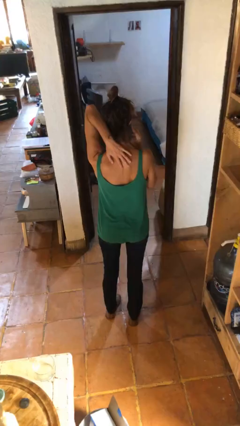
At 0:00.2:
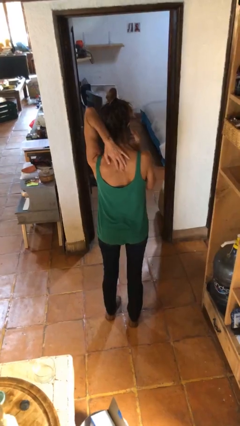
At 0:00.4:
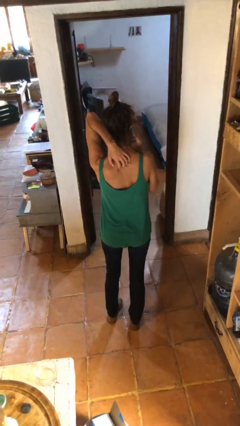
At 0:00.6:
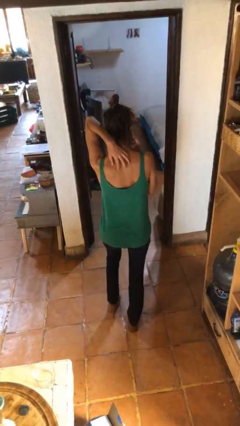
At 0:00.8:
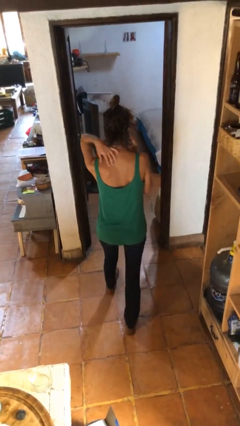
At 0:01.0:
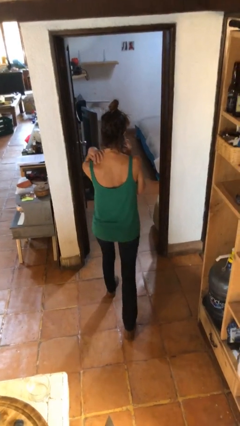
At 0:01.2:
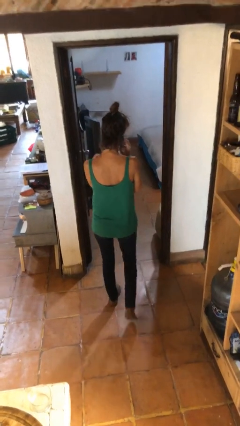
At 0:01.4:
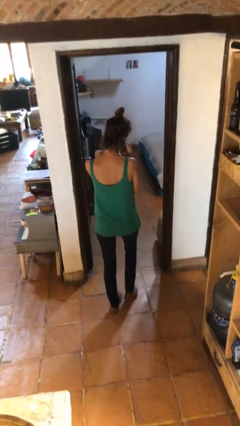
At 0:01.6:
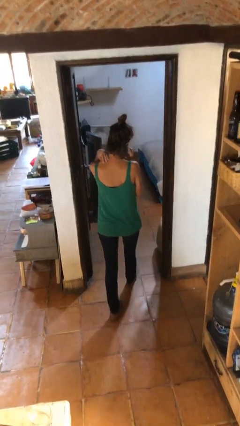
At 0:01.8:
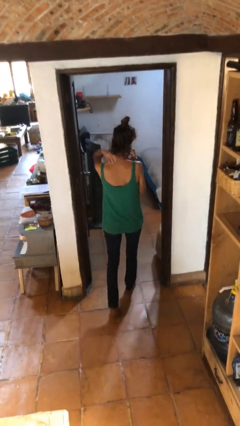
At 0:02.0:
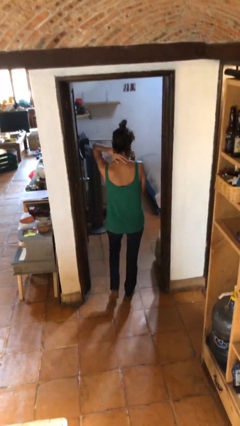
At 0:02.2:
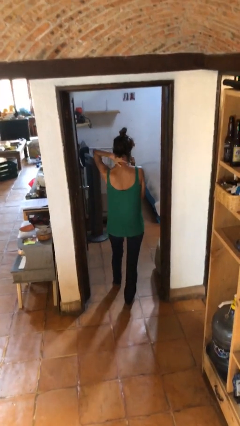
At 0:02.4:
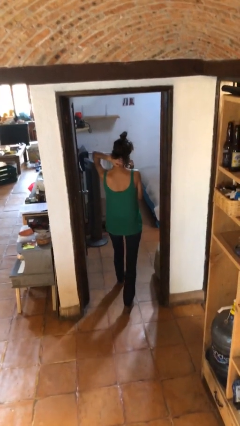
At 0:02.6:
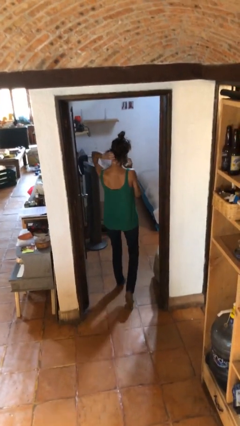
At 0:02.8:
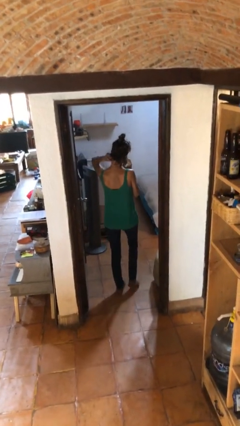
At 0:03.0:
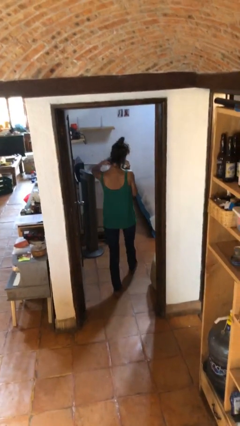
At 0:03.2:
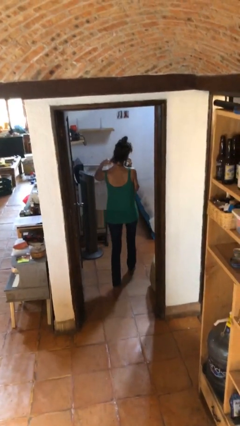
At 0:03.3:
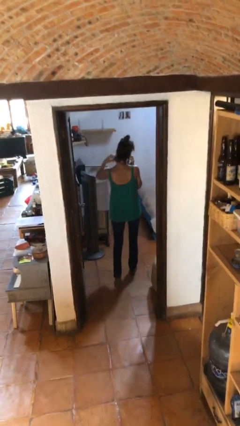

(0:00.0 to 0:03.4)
person exits scene through structure

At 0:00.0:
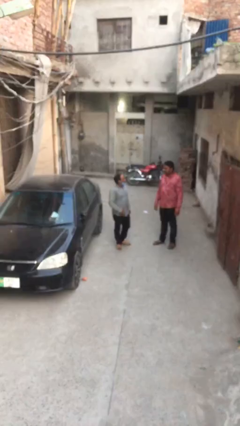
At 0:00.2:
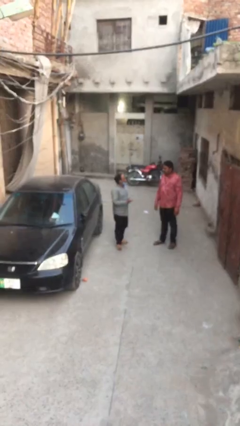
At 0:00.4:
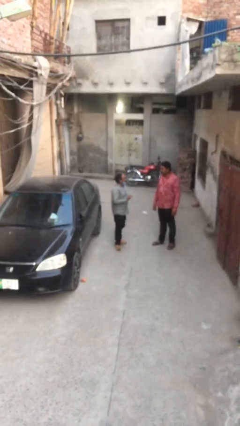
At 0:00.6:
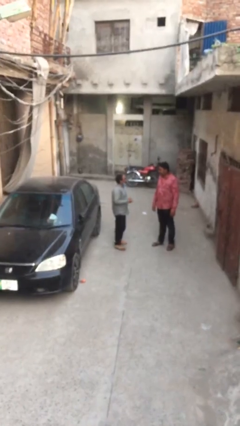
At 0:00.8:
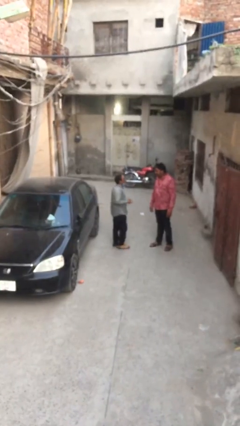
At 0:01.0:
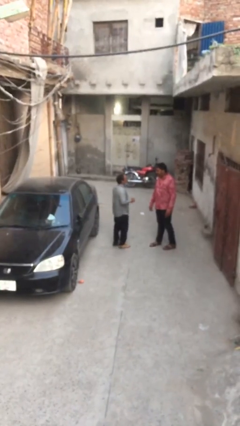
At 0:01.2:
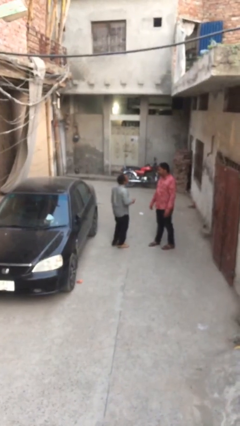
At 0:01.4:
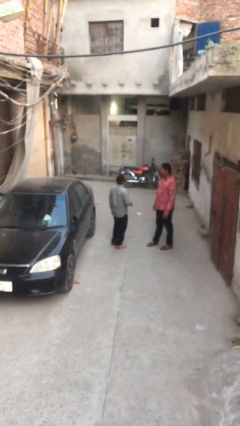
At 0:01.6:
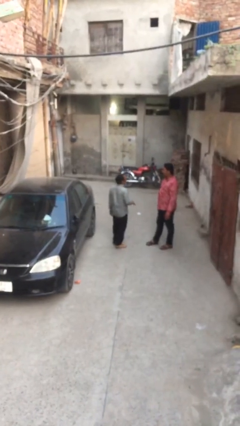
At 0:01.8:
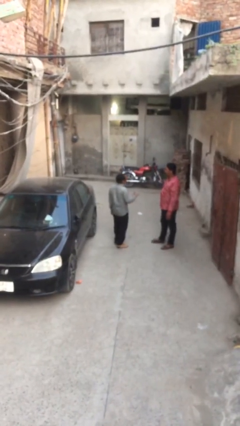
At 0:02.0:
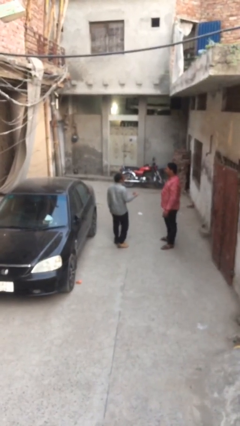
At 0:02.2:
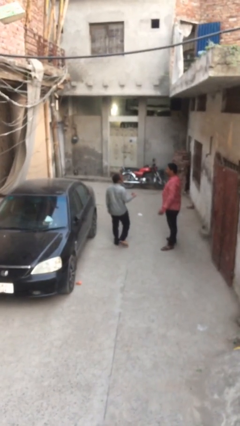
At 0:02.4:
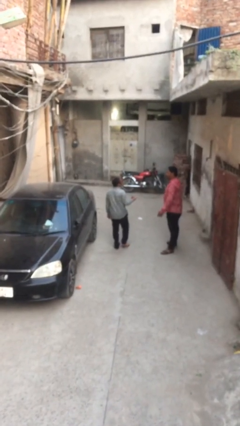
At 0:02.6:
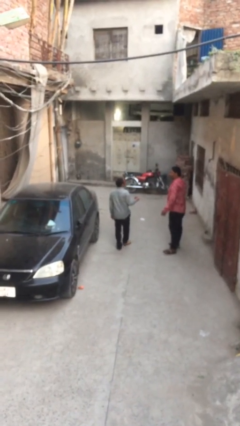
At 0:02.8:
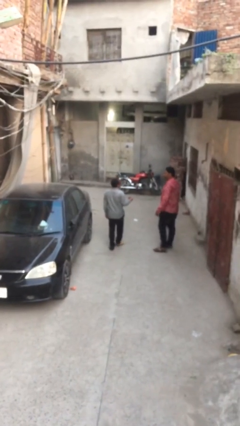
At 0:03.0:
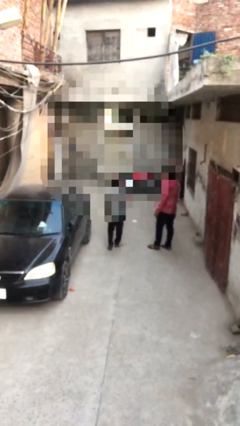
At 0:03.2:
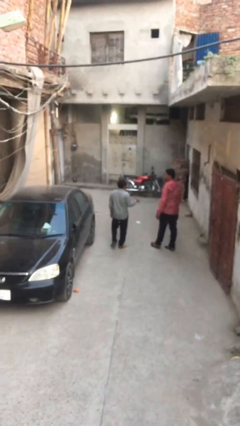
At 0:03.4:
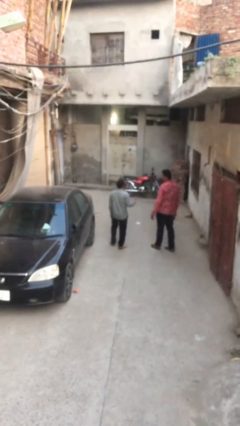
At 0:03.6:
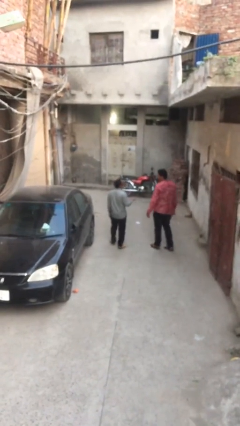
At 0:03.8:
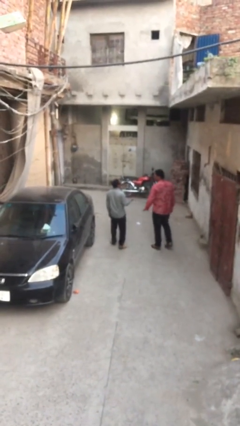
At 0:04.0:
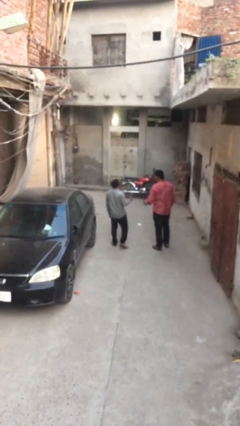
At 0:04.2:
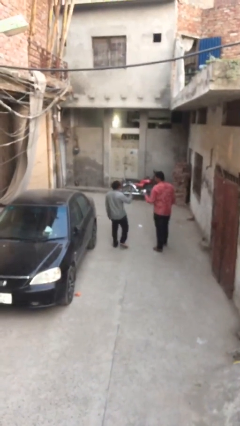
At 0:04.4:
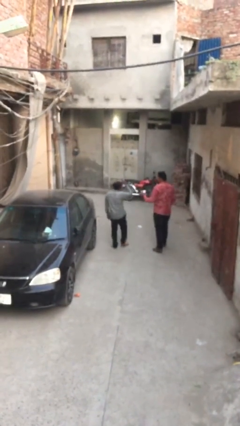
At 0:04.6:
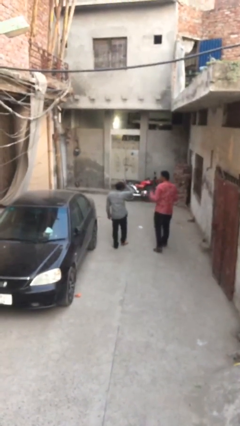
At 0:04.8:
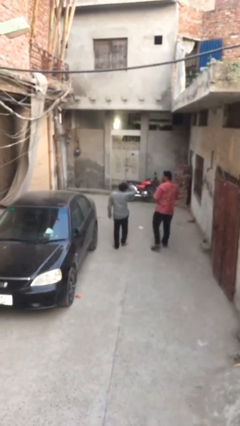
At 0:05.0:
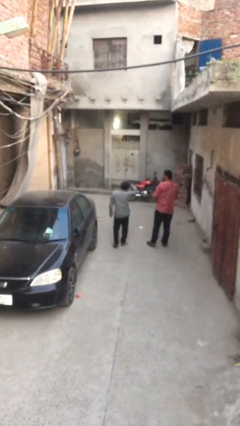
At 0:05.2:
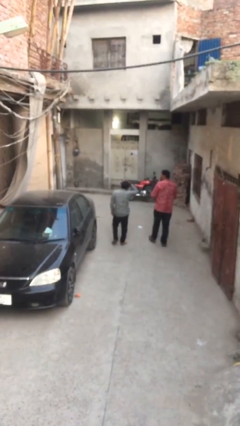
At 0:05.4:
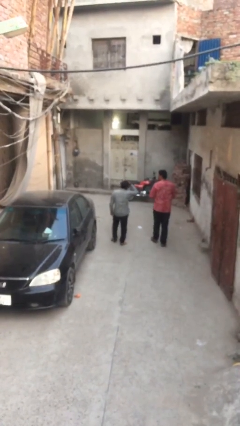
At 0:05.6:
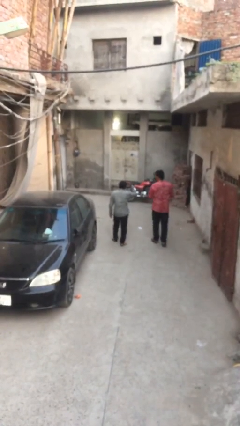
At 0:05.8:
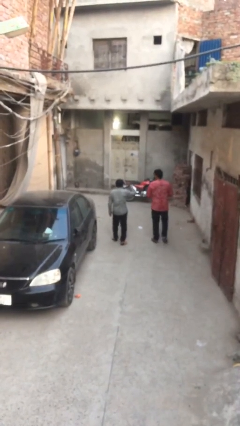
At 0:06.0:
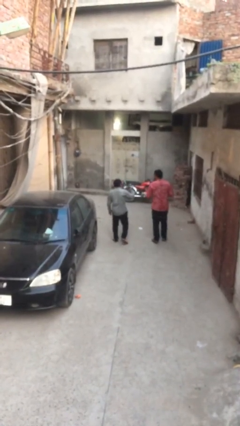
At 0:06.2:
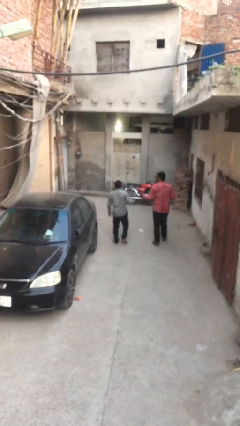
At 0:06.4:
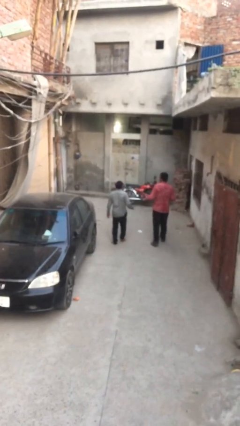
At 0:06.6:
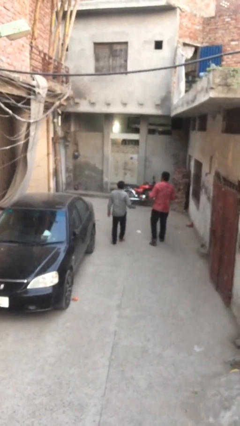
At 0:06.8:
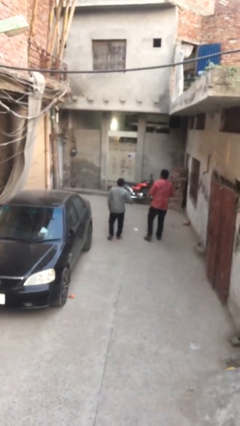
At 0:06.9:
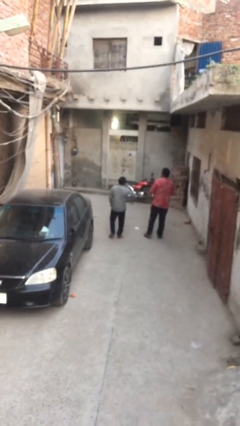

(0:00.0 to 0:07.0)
person talks to person

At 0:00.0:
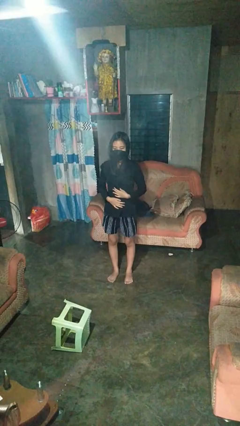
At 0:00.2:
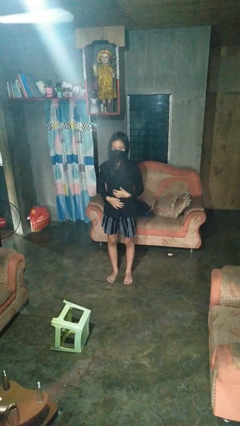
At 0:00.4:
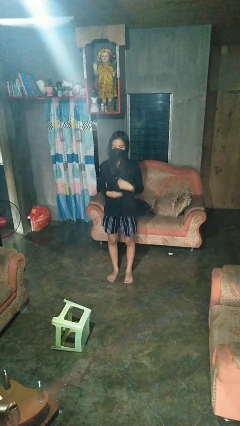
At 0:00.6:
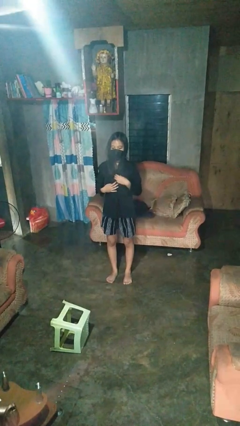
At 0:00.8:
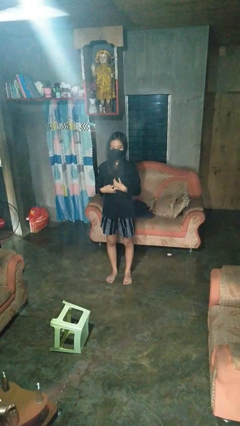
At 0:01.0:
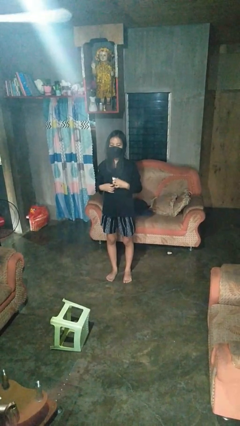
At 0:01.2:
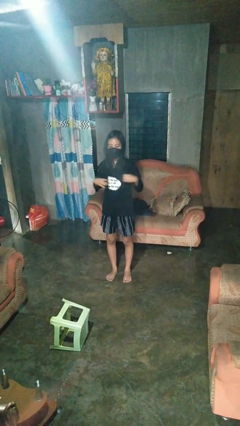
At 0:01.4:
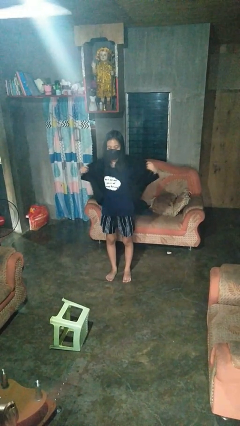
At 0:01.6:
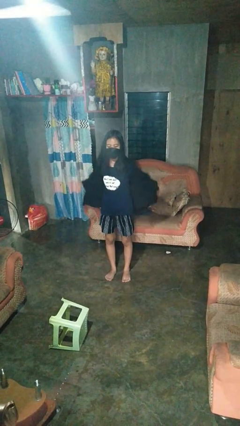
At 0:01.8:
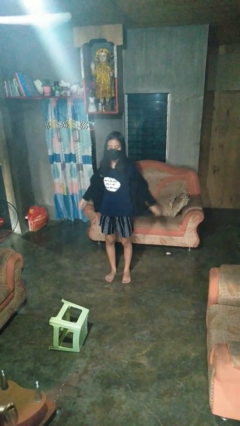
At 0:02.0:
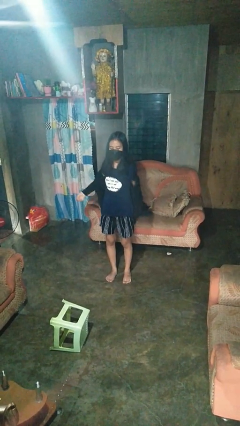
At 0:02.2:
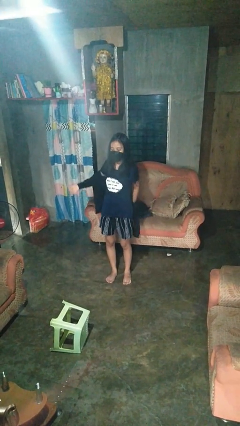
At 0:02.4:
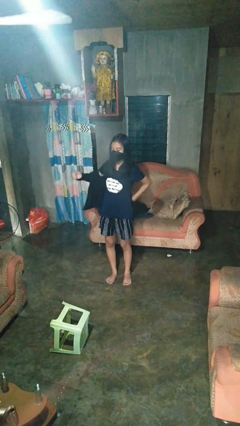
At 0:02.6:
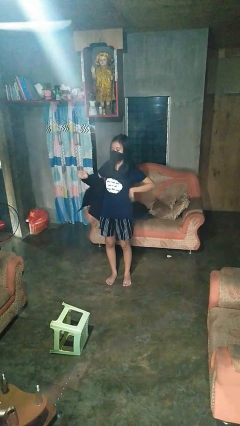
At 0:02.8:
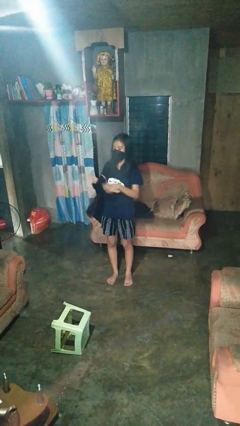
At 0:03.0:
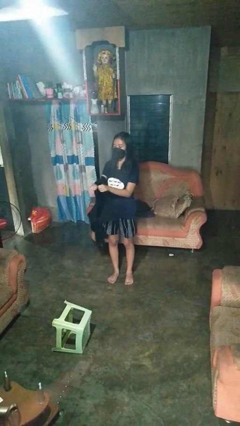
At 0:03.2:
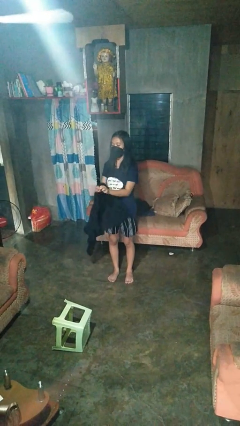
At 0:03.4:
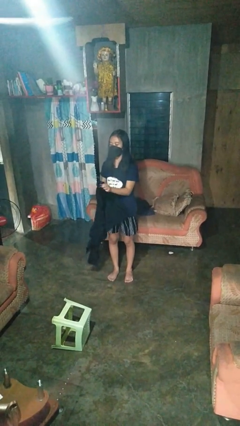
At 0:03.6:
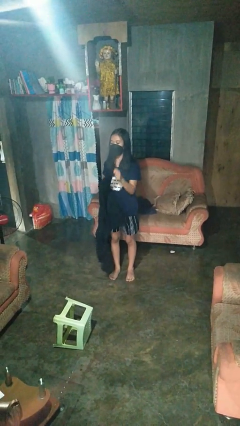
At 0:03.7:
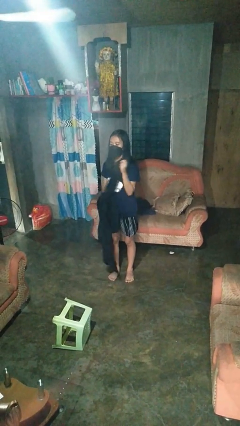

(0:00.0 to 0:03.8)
person takes off shirt

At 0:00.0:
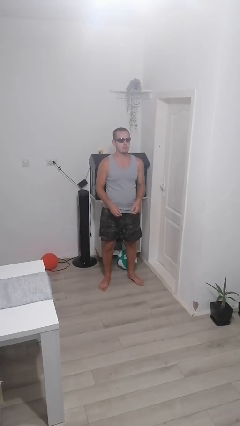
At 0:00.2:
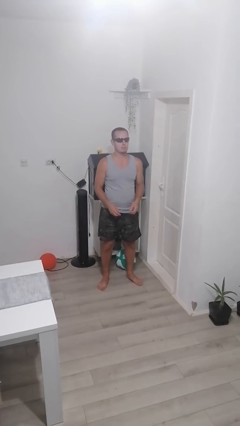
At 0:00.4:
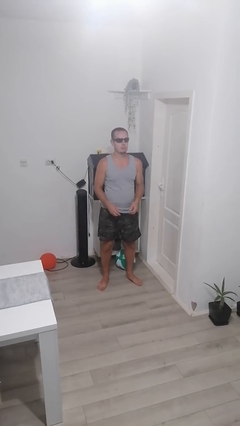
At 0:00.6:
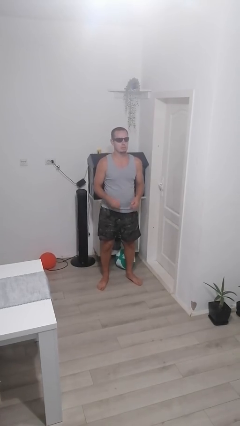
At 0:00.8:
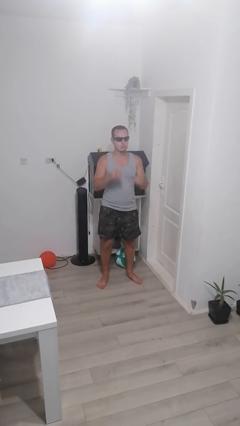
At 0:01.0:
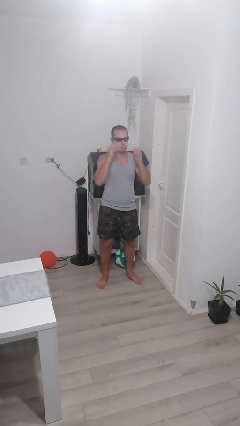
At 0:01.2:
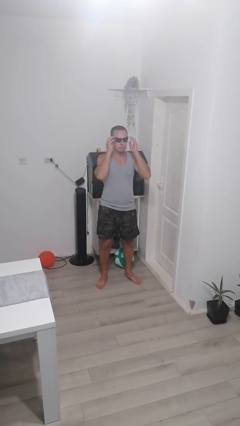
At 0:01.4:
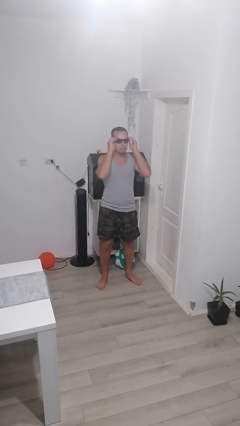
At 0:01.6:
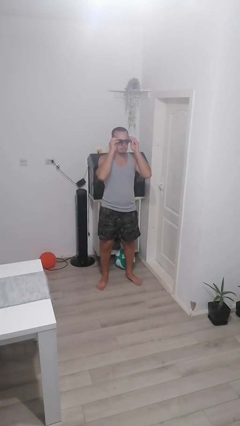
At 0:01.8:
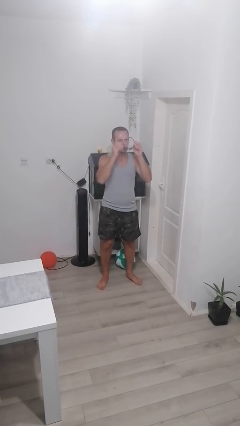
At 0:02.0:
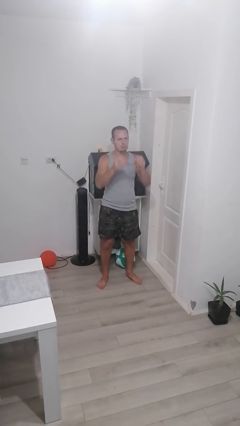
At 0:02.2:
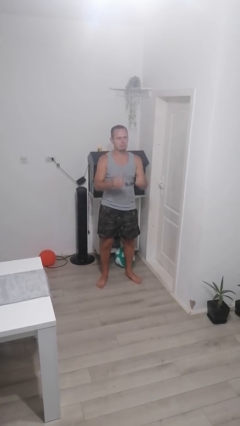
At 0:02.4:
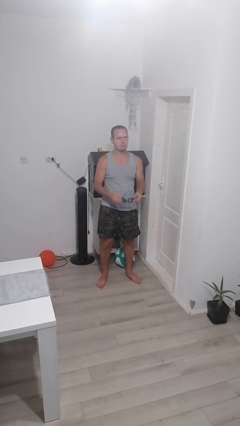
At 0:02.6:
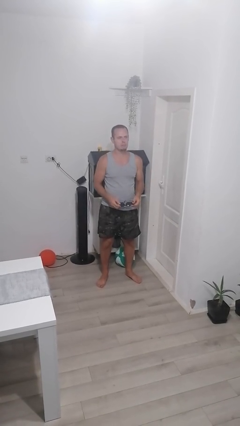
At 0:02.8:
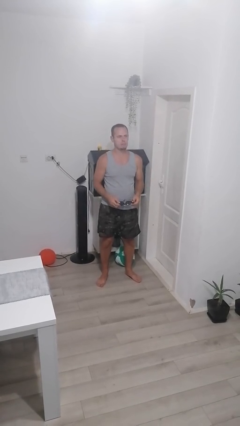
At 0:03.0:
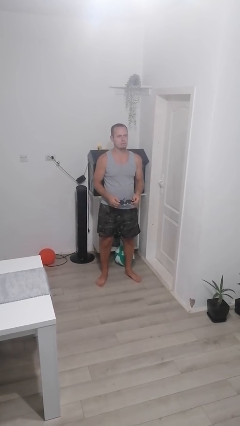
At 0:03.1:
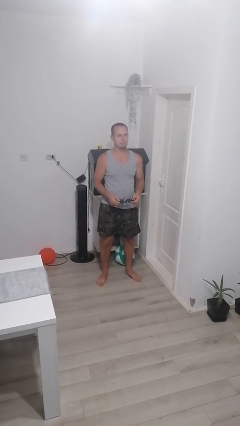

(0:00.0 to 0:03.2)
person takes off sunglasses

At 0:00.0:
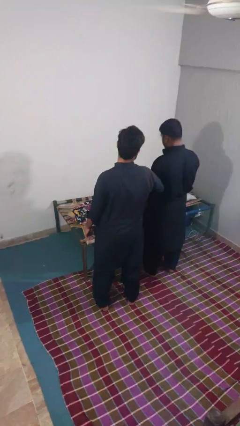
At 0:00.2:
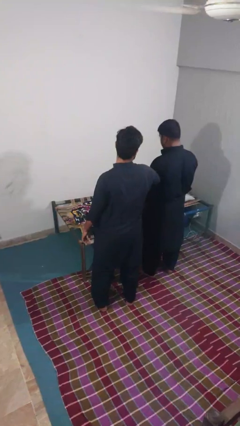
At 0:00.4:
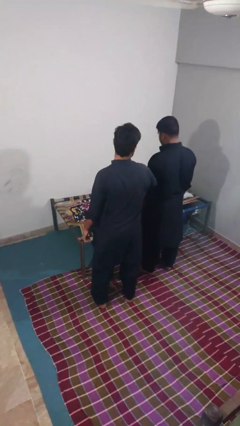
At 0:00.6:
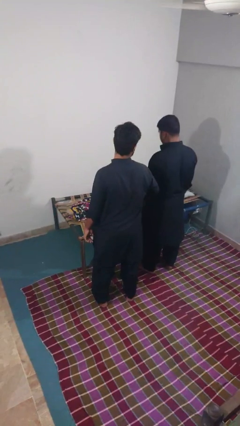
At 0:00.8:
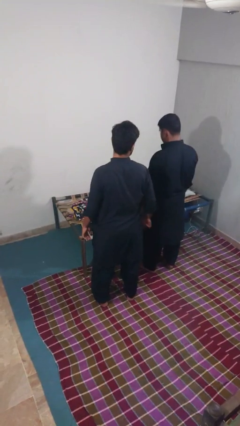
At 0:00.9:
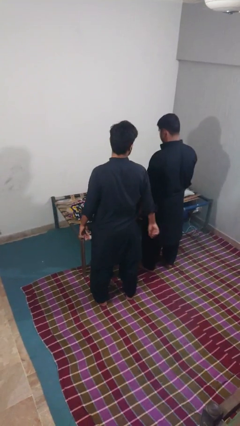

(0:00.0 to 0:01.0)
person nudges person with elbow
